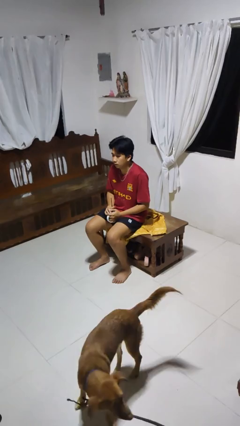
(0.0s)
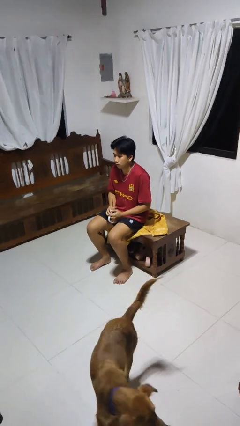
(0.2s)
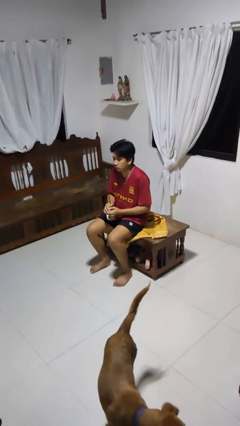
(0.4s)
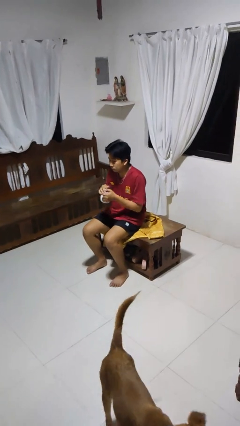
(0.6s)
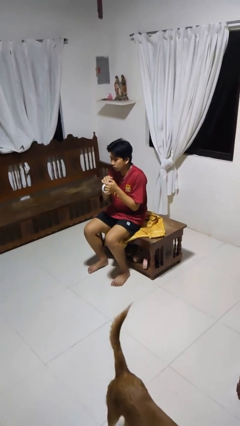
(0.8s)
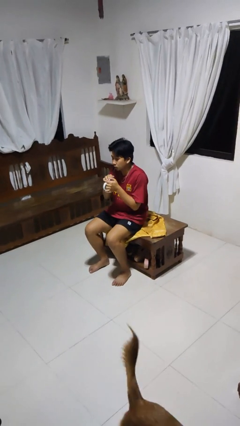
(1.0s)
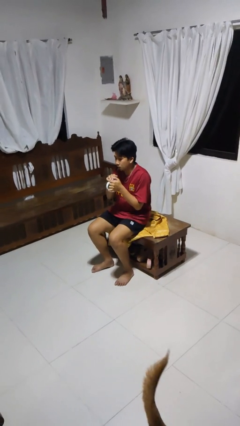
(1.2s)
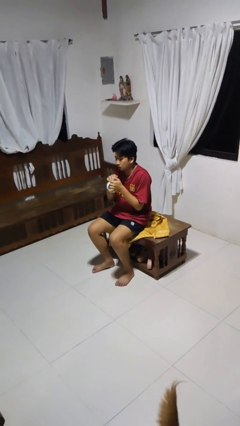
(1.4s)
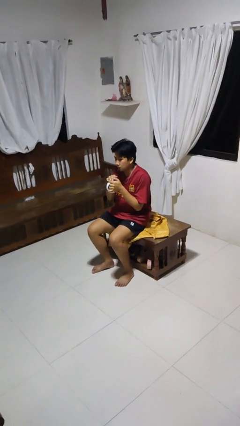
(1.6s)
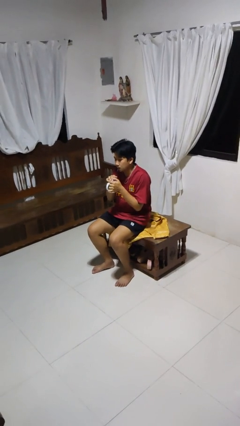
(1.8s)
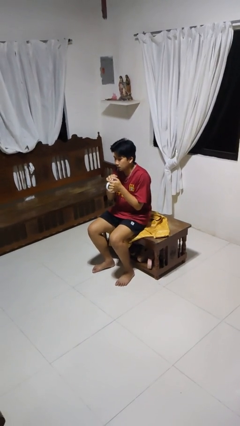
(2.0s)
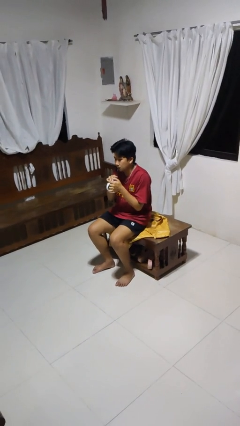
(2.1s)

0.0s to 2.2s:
person drinks from straw

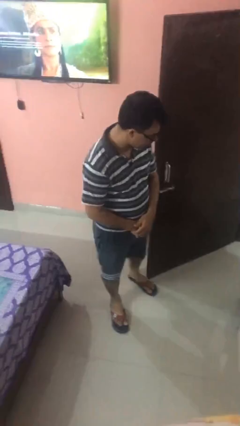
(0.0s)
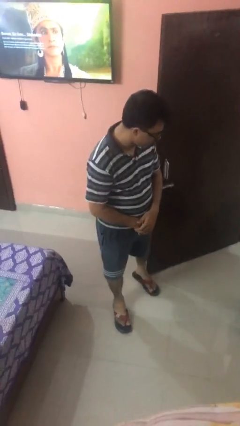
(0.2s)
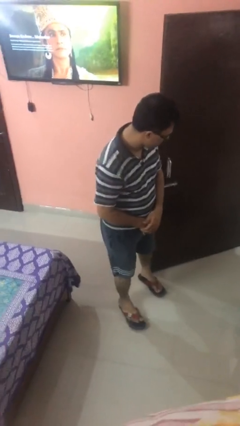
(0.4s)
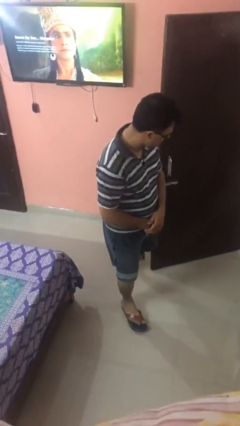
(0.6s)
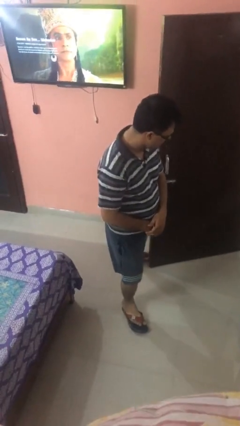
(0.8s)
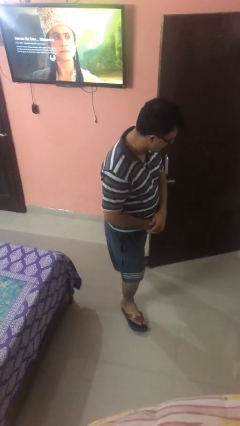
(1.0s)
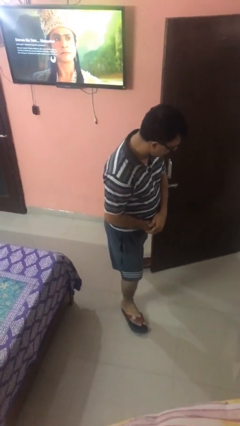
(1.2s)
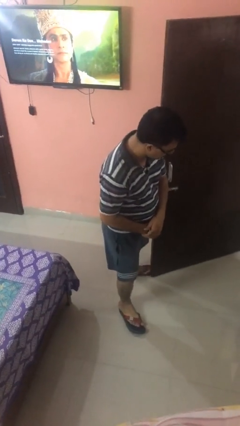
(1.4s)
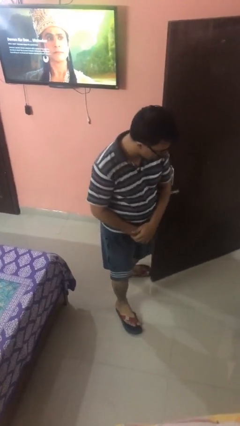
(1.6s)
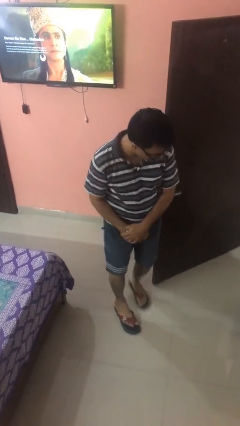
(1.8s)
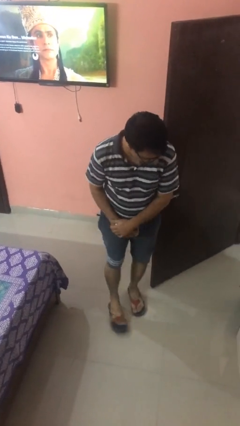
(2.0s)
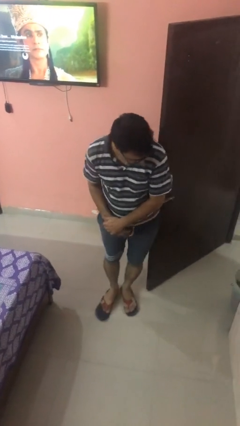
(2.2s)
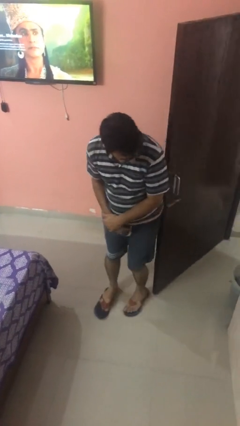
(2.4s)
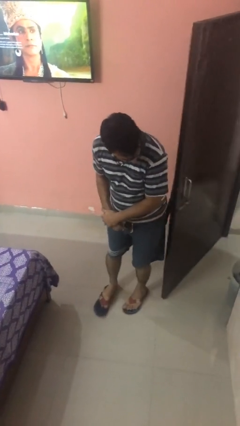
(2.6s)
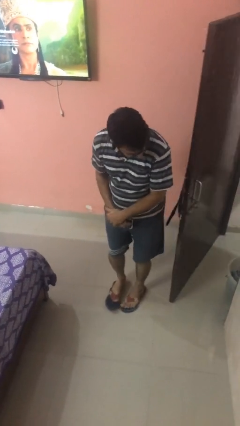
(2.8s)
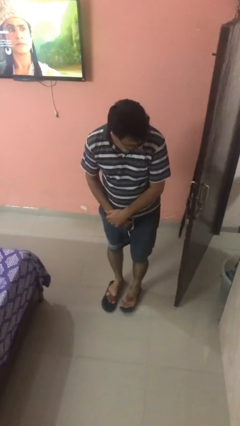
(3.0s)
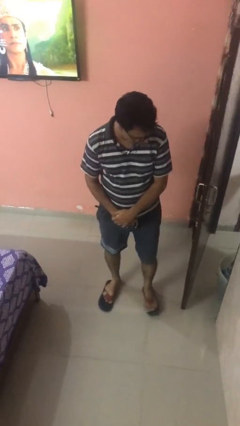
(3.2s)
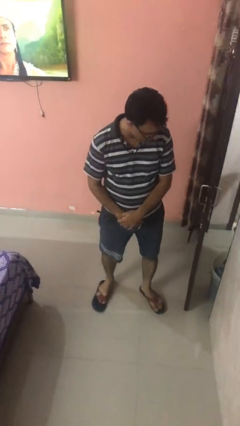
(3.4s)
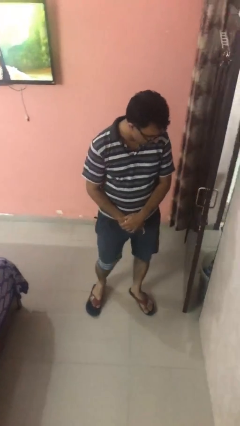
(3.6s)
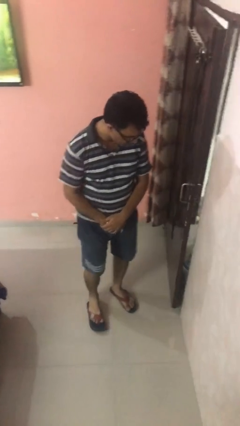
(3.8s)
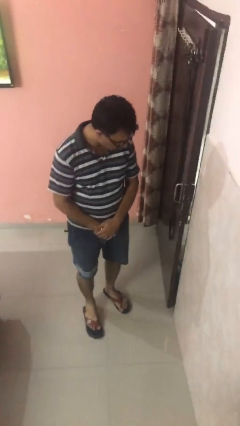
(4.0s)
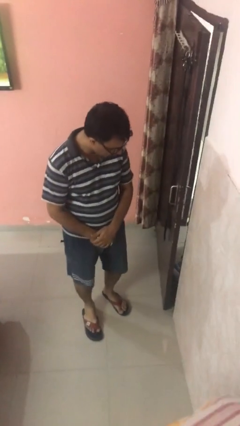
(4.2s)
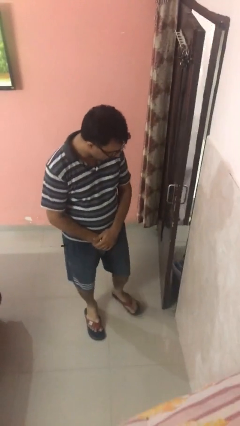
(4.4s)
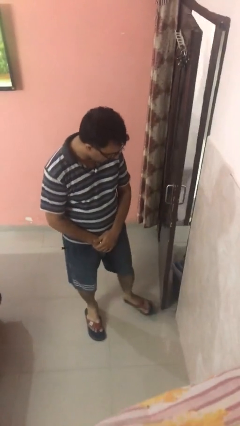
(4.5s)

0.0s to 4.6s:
person closes door with hip

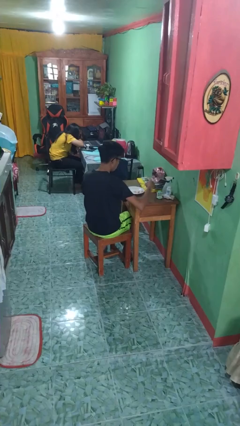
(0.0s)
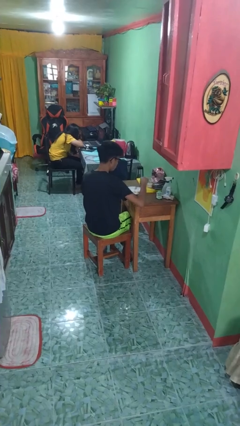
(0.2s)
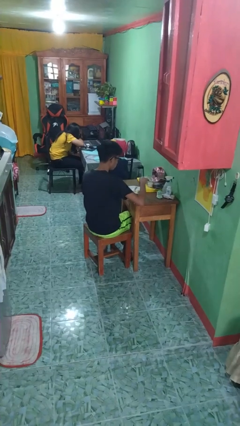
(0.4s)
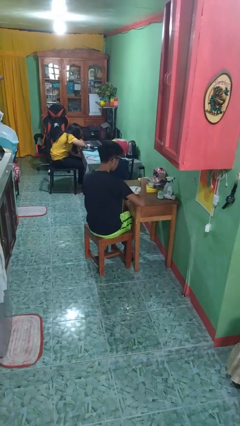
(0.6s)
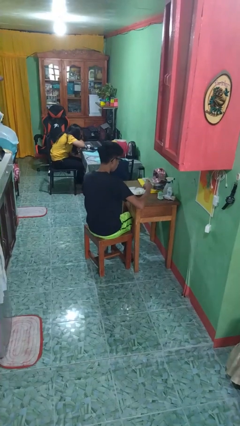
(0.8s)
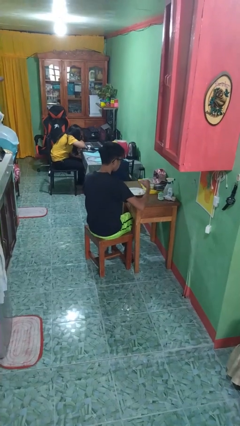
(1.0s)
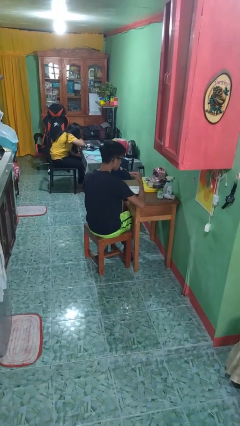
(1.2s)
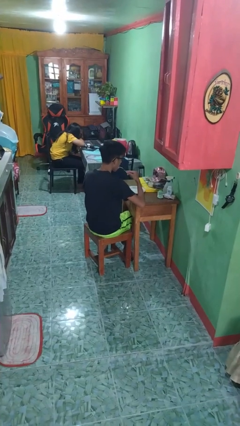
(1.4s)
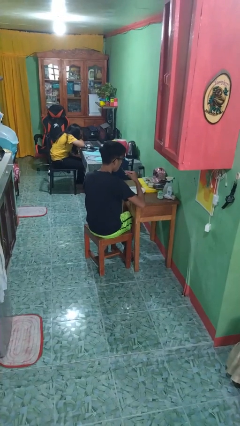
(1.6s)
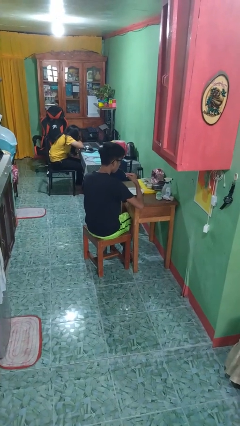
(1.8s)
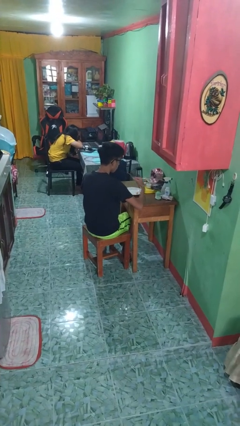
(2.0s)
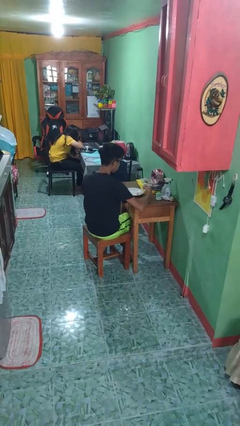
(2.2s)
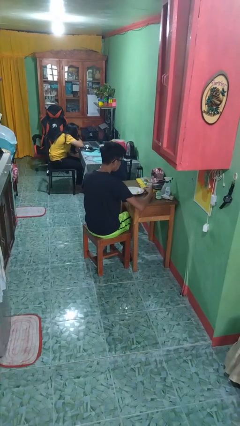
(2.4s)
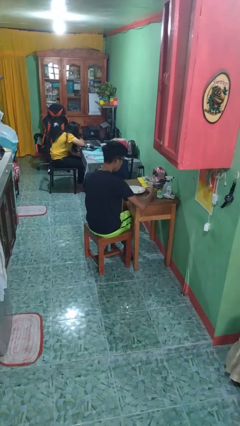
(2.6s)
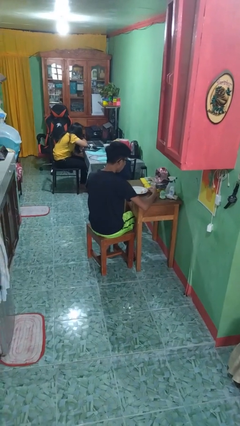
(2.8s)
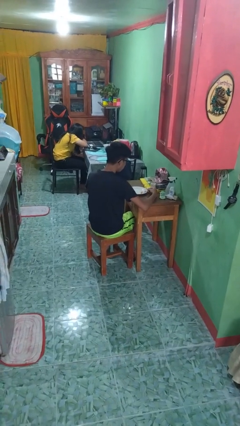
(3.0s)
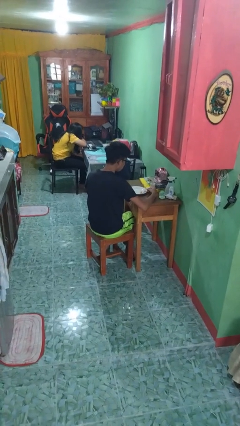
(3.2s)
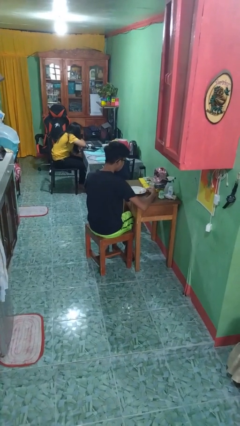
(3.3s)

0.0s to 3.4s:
person eats with utensil

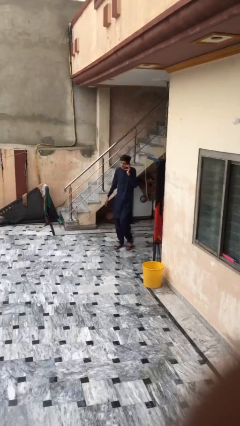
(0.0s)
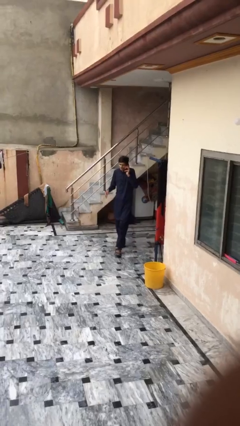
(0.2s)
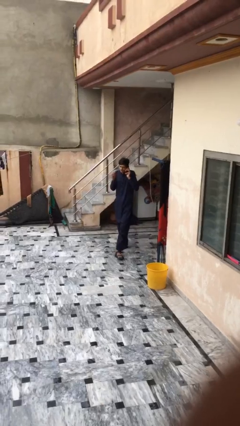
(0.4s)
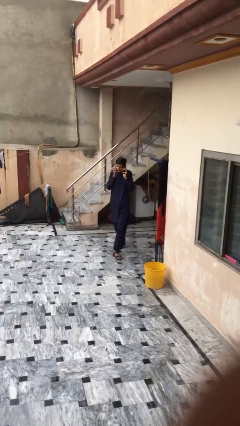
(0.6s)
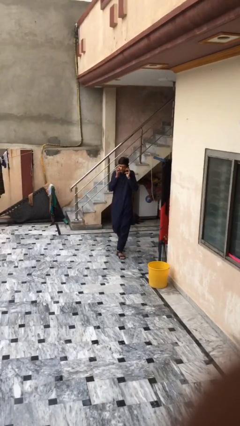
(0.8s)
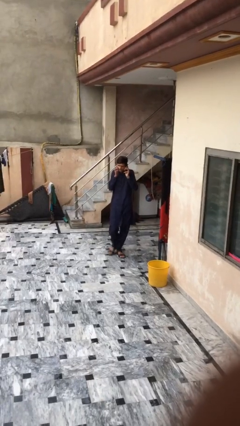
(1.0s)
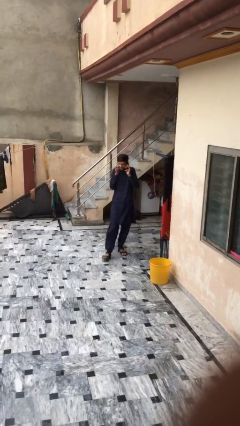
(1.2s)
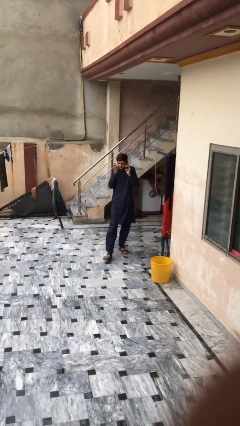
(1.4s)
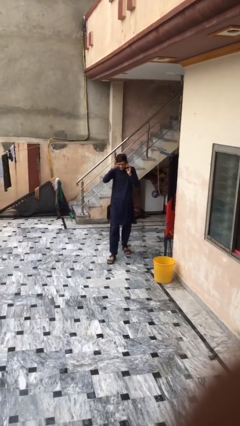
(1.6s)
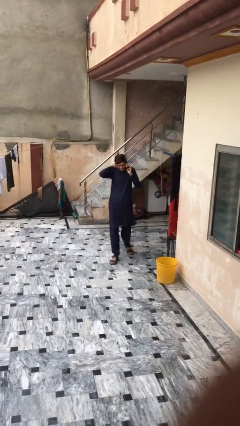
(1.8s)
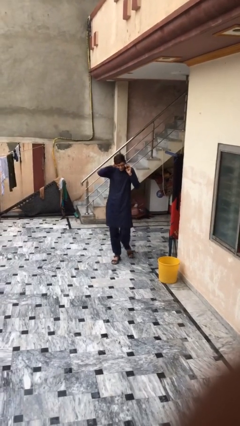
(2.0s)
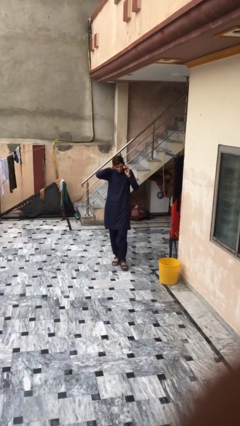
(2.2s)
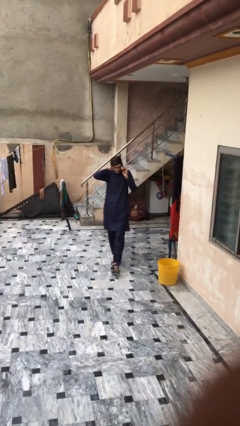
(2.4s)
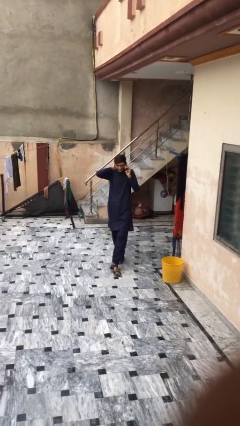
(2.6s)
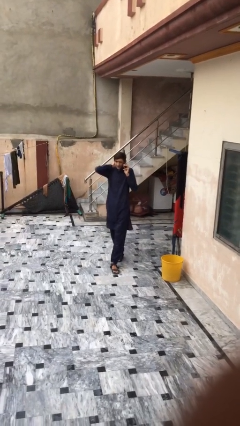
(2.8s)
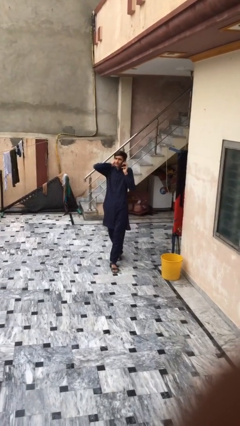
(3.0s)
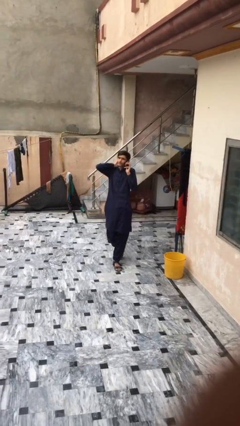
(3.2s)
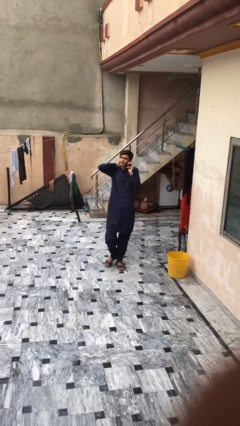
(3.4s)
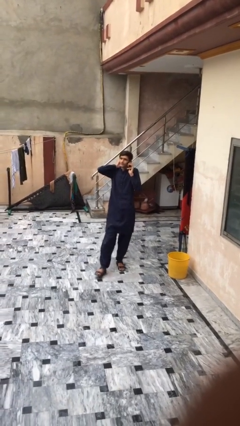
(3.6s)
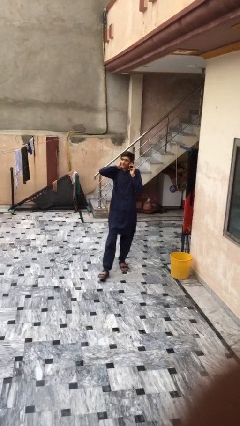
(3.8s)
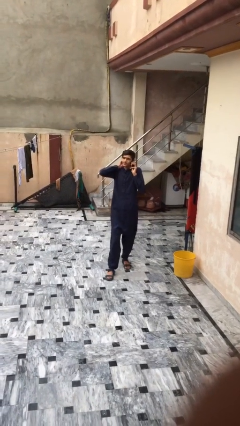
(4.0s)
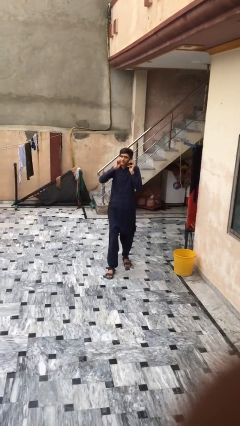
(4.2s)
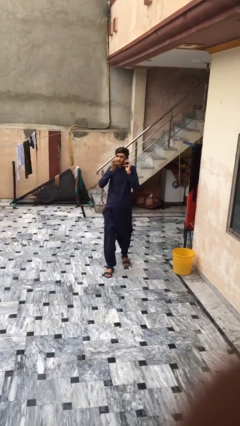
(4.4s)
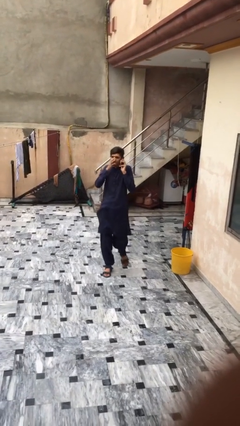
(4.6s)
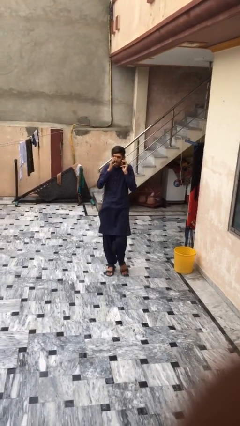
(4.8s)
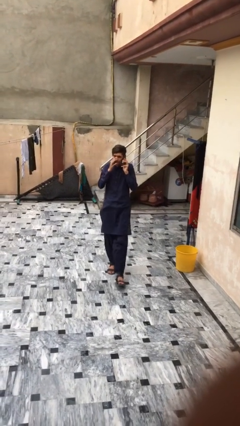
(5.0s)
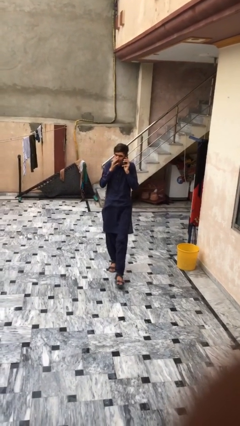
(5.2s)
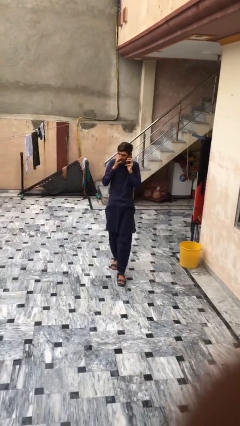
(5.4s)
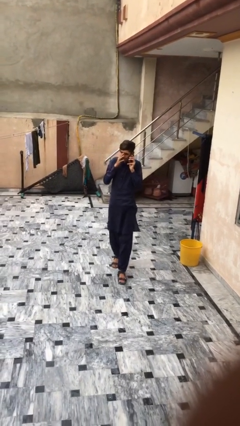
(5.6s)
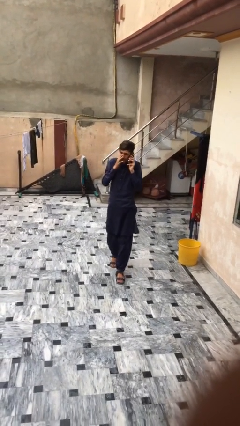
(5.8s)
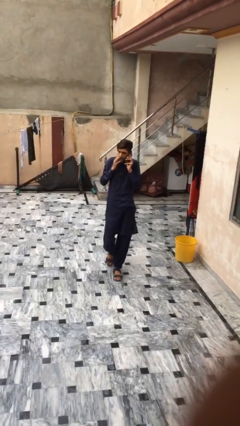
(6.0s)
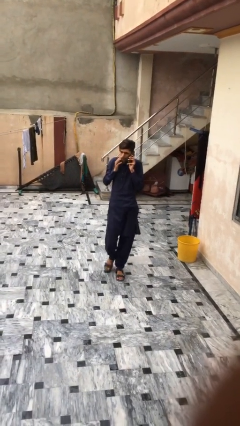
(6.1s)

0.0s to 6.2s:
person enters scene through structure

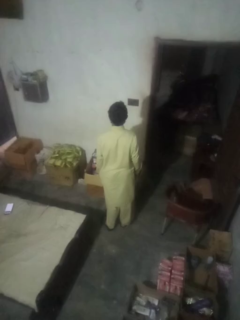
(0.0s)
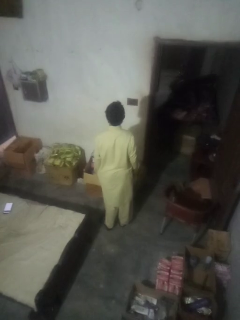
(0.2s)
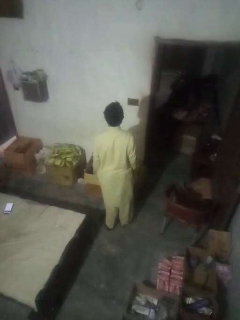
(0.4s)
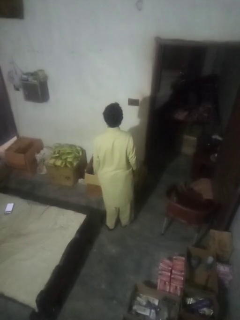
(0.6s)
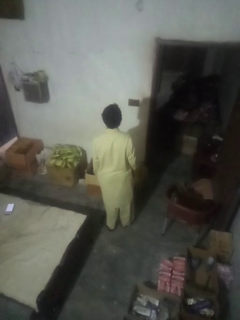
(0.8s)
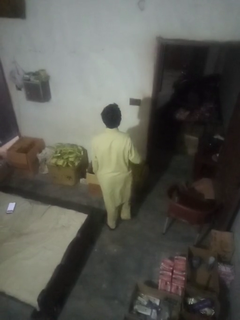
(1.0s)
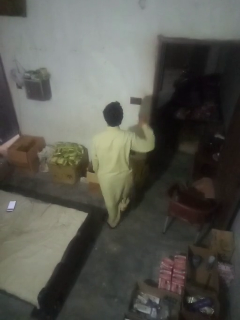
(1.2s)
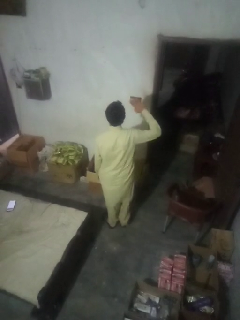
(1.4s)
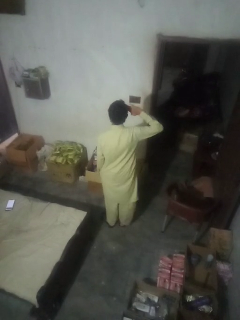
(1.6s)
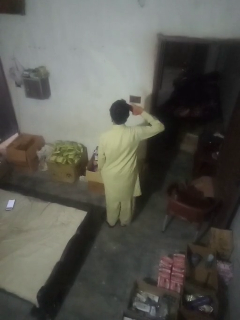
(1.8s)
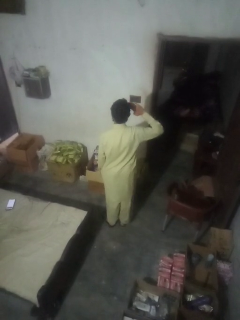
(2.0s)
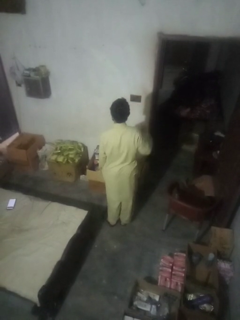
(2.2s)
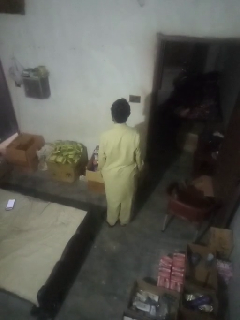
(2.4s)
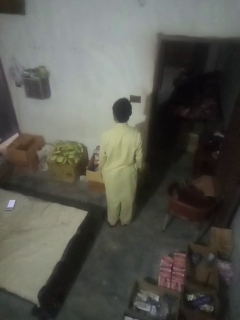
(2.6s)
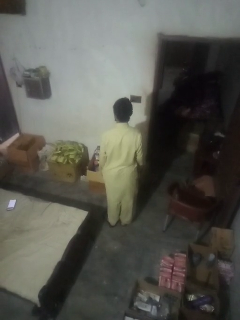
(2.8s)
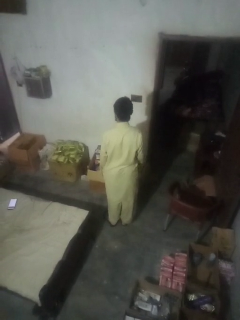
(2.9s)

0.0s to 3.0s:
person salutes
